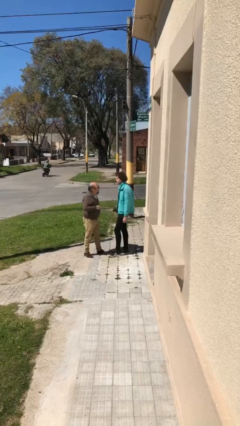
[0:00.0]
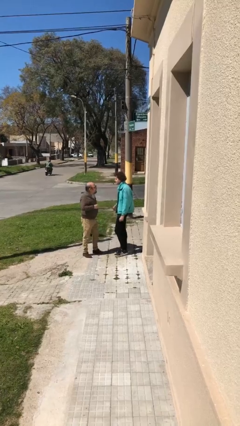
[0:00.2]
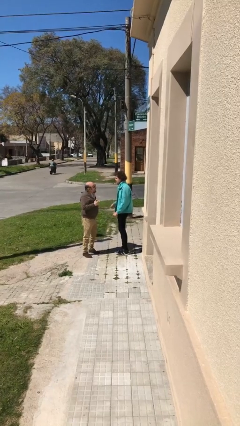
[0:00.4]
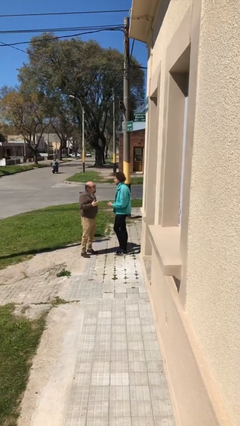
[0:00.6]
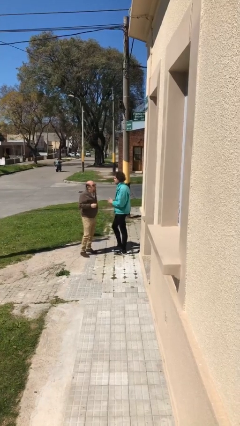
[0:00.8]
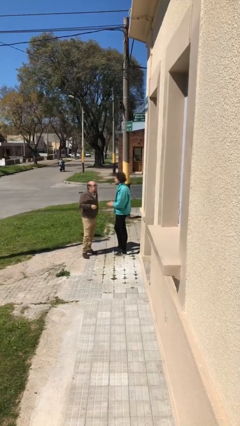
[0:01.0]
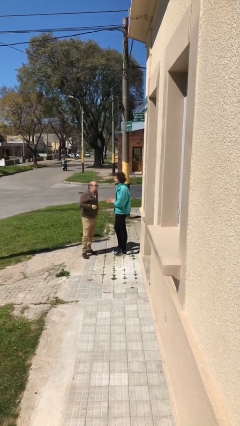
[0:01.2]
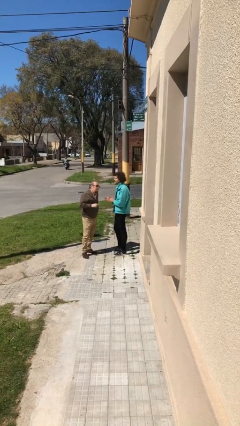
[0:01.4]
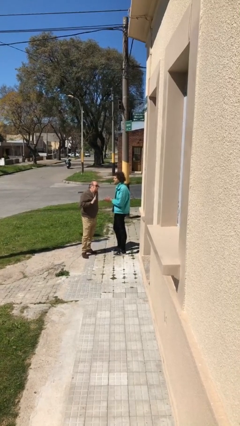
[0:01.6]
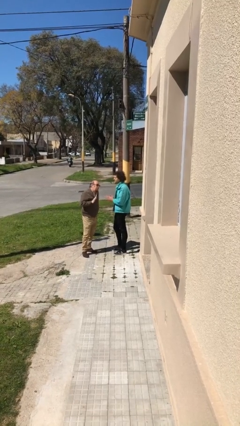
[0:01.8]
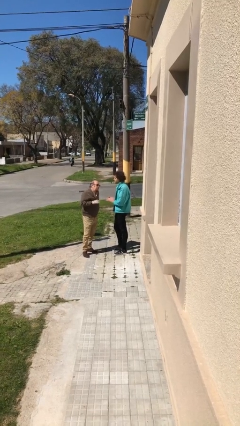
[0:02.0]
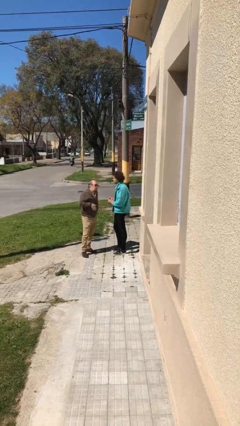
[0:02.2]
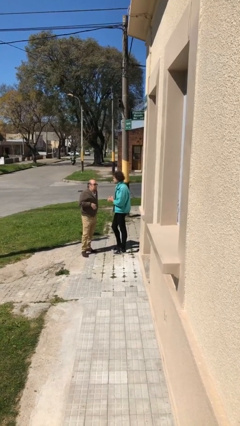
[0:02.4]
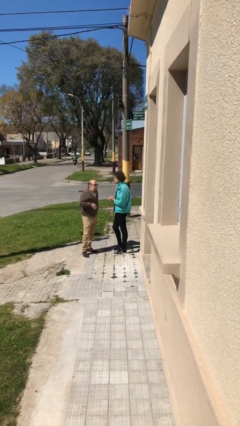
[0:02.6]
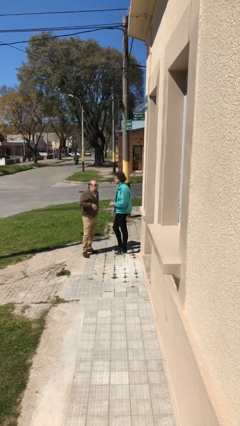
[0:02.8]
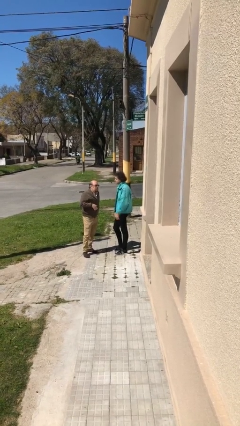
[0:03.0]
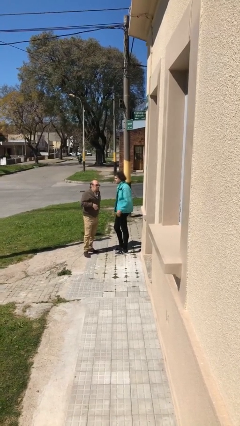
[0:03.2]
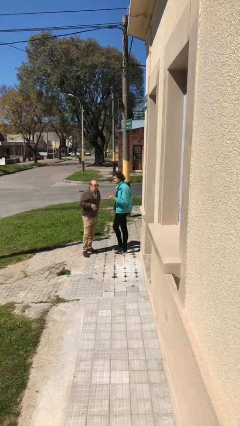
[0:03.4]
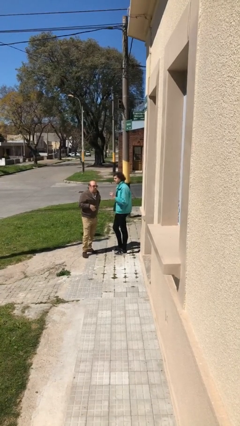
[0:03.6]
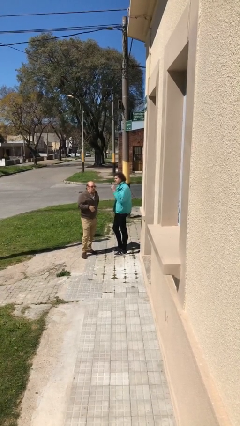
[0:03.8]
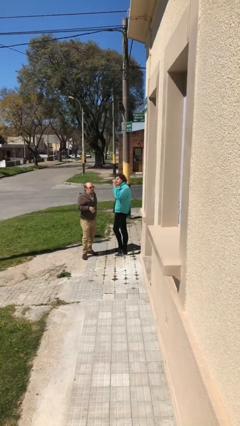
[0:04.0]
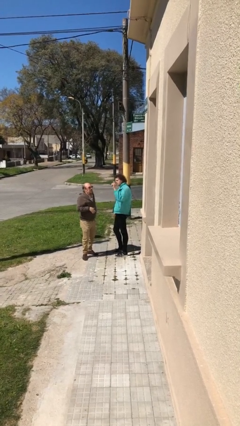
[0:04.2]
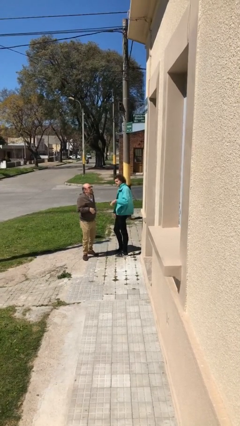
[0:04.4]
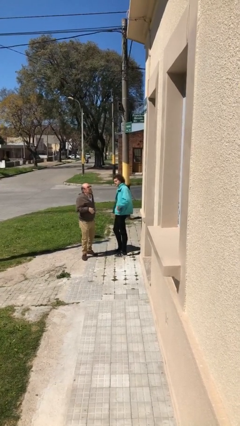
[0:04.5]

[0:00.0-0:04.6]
person talks to person

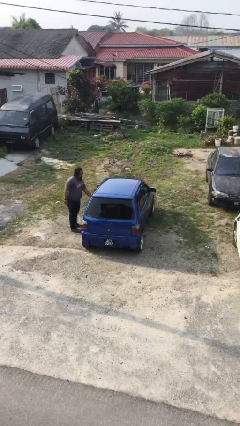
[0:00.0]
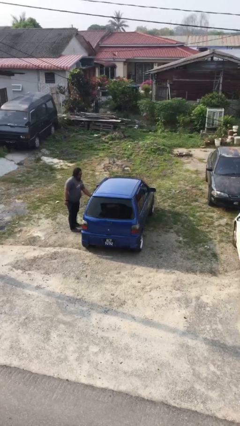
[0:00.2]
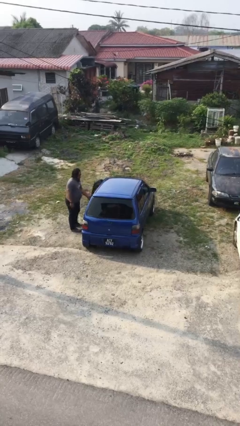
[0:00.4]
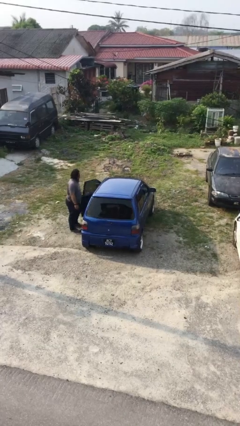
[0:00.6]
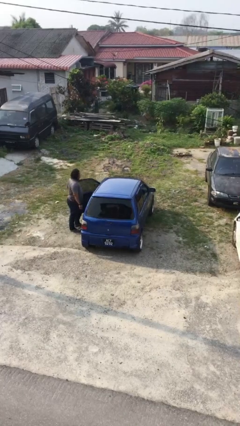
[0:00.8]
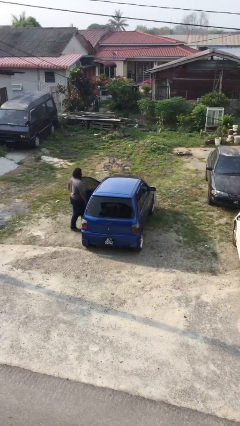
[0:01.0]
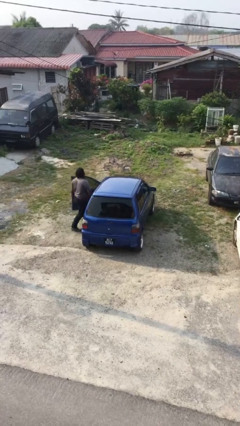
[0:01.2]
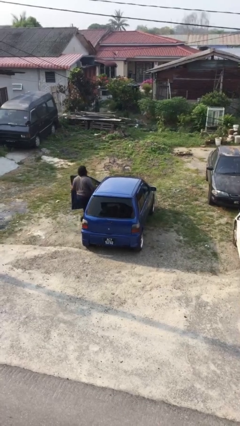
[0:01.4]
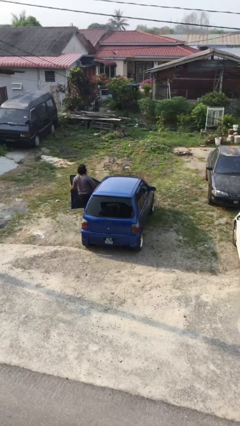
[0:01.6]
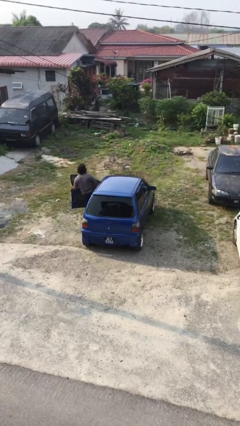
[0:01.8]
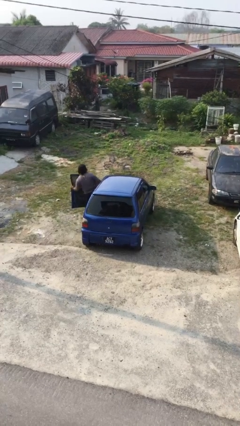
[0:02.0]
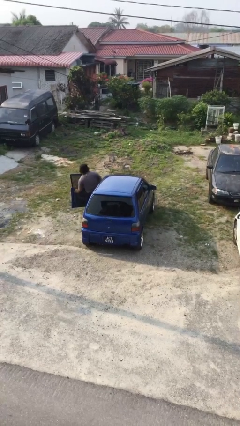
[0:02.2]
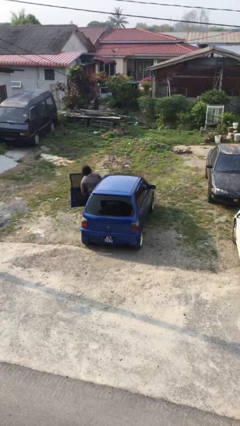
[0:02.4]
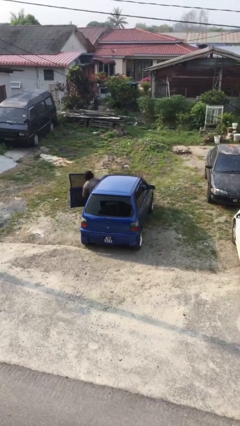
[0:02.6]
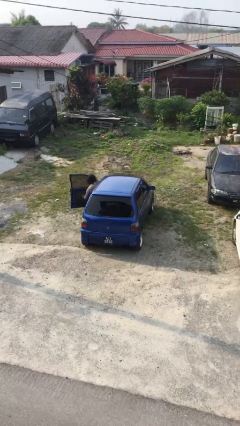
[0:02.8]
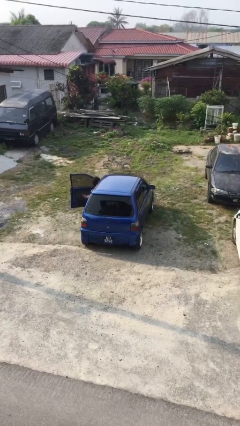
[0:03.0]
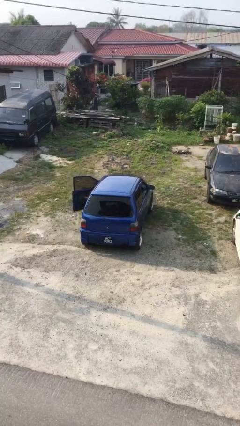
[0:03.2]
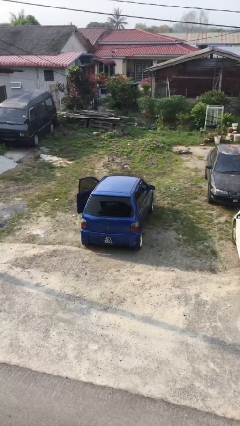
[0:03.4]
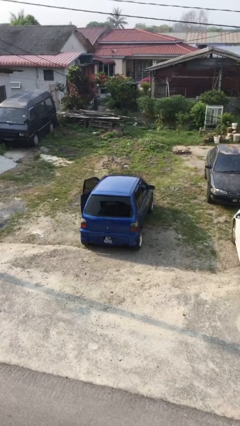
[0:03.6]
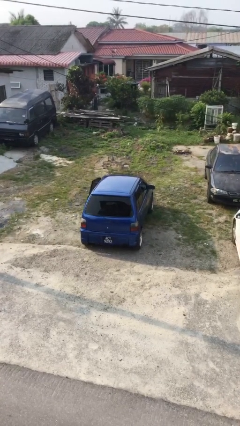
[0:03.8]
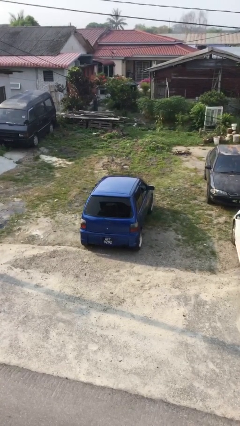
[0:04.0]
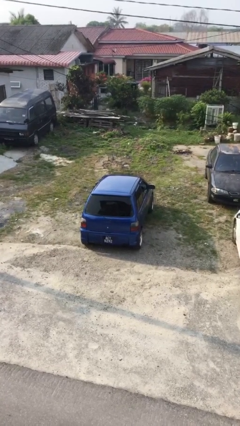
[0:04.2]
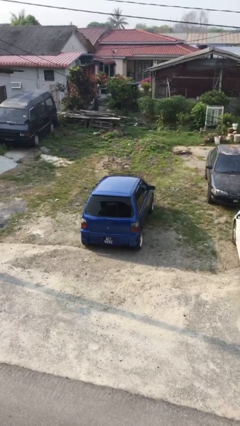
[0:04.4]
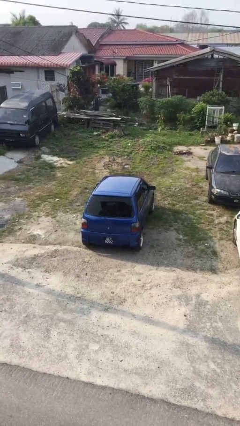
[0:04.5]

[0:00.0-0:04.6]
car picks up person

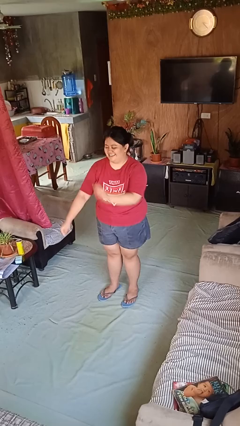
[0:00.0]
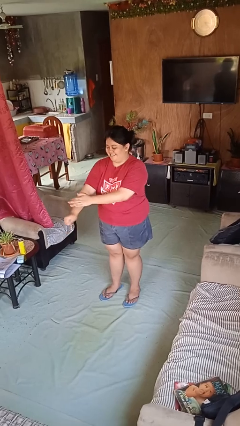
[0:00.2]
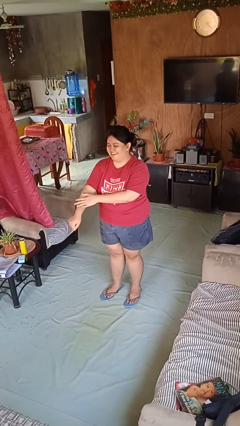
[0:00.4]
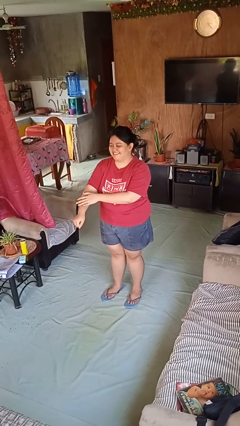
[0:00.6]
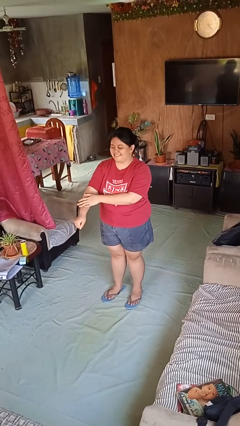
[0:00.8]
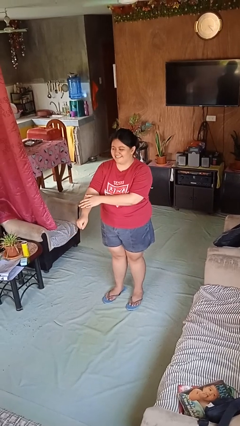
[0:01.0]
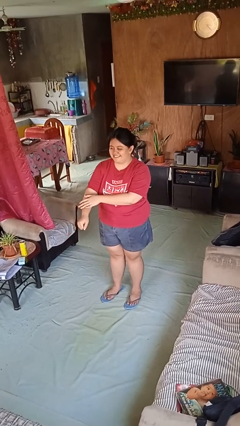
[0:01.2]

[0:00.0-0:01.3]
person swats bug

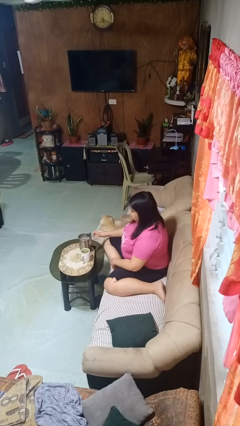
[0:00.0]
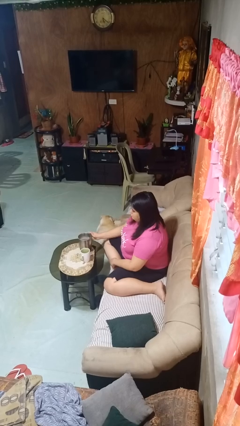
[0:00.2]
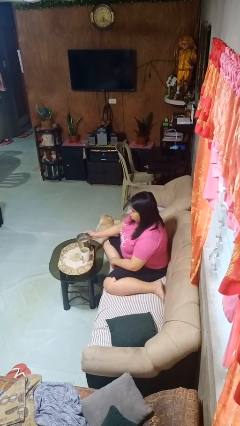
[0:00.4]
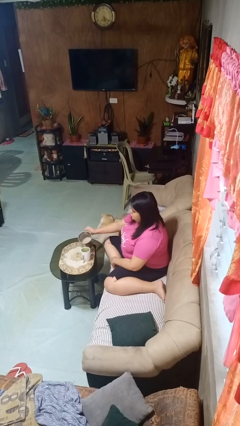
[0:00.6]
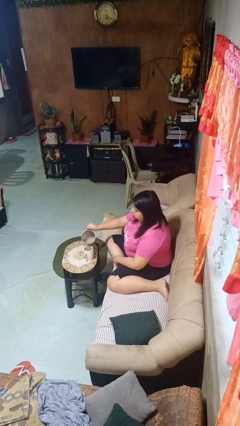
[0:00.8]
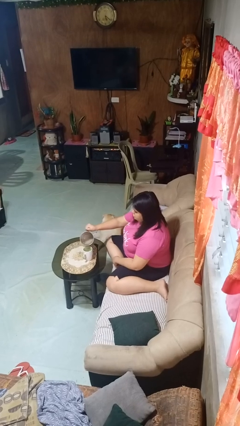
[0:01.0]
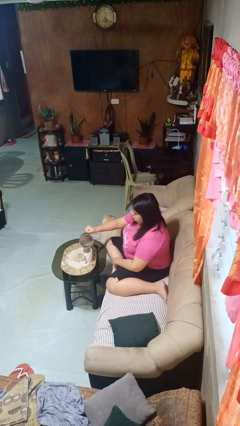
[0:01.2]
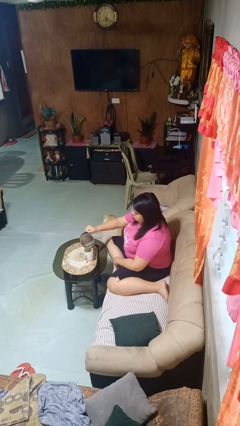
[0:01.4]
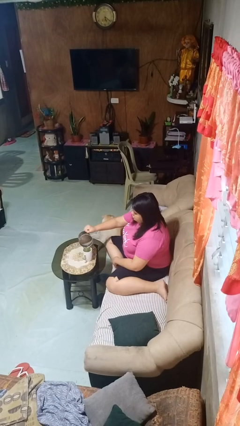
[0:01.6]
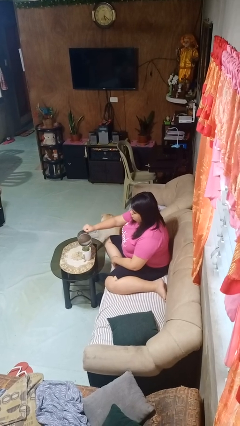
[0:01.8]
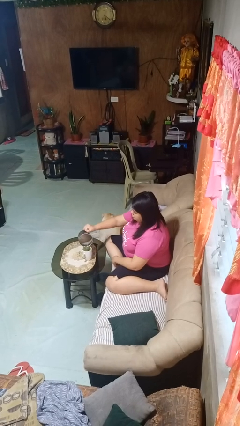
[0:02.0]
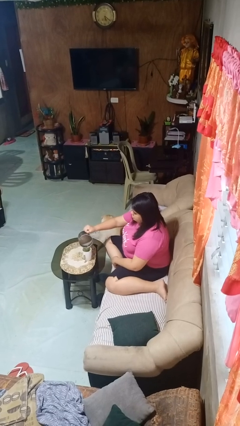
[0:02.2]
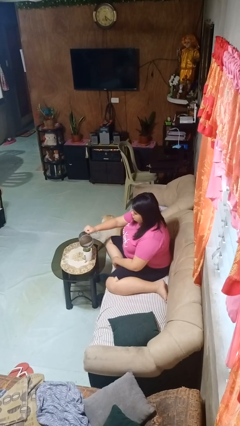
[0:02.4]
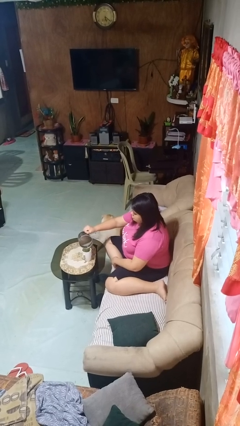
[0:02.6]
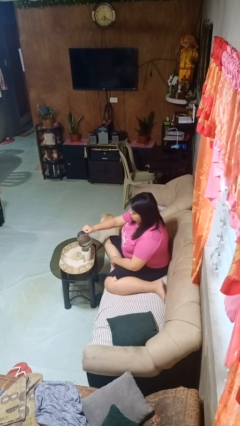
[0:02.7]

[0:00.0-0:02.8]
person pours coffee into mug

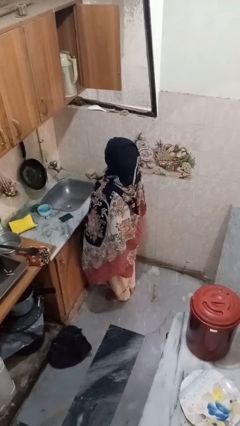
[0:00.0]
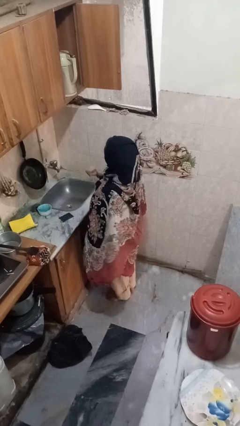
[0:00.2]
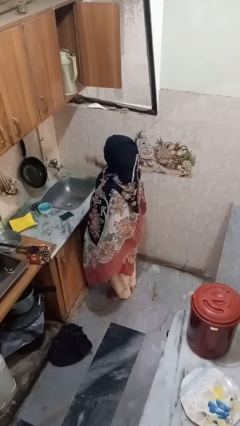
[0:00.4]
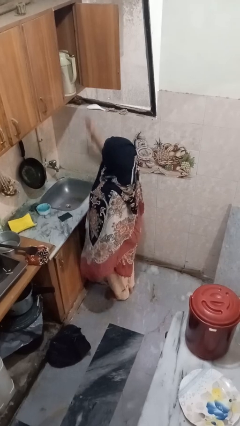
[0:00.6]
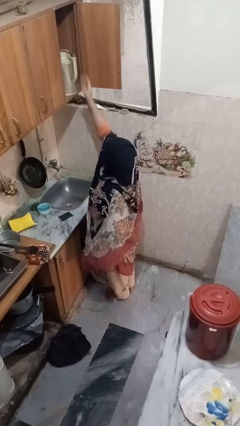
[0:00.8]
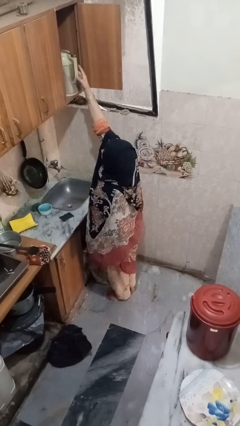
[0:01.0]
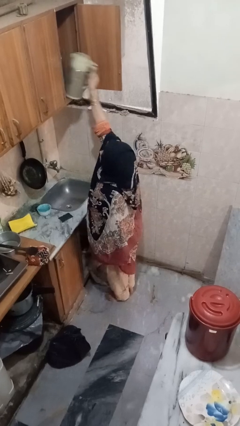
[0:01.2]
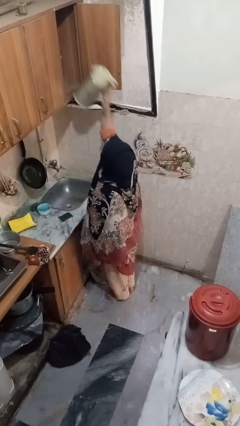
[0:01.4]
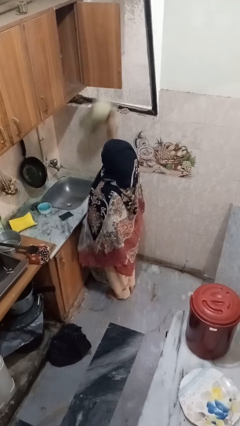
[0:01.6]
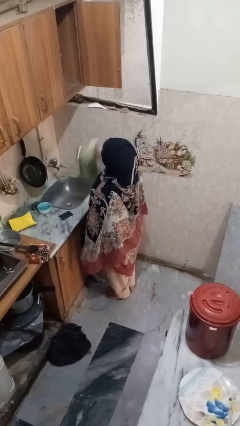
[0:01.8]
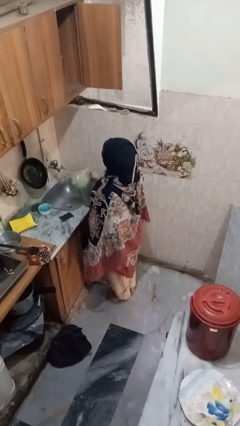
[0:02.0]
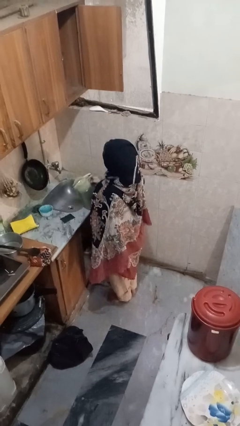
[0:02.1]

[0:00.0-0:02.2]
person puts object in cabinet

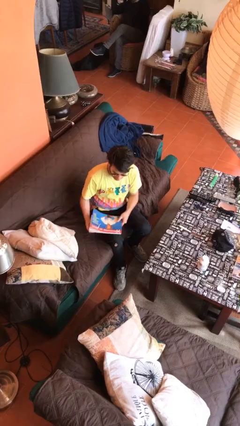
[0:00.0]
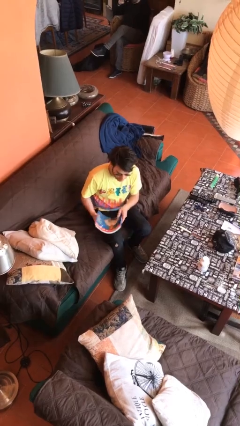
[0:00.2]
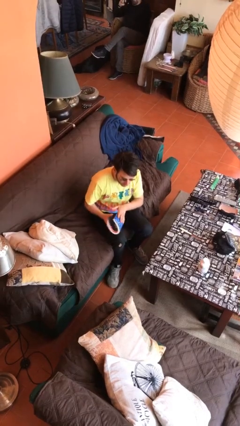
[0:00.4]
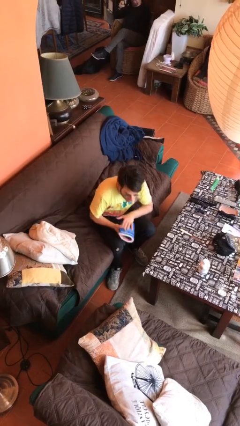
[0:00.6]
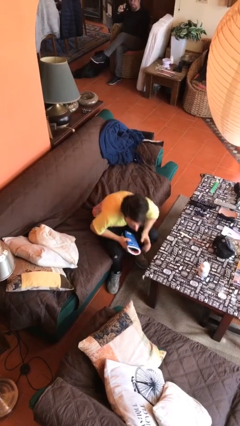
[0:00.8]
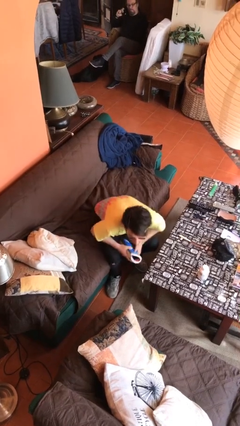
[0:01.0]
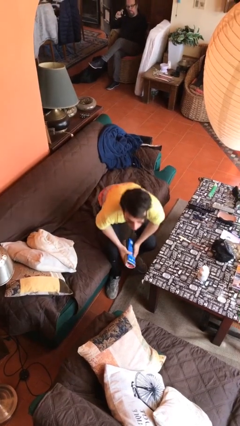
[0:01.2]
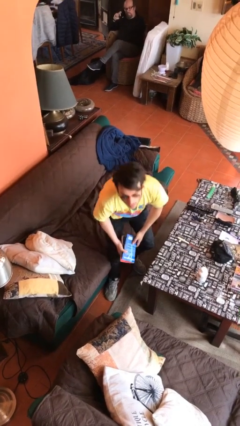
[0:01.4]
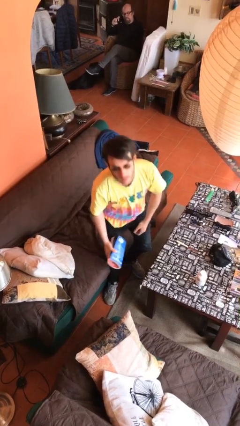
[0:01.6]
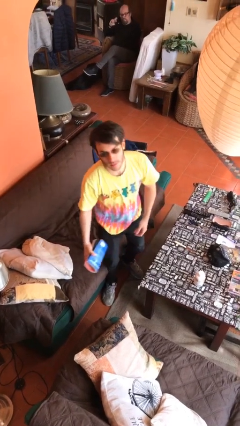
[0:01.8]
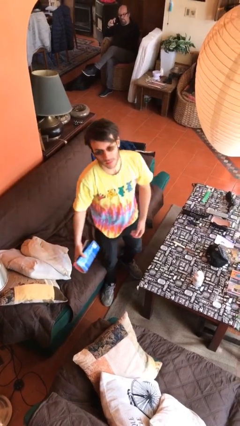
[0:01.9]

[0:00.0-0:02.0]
person stands up
